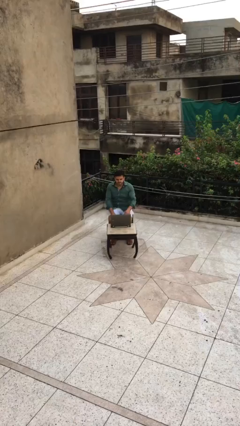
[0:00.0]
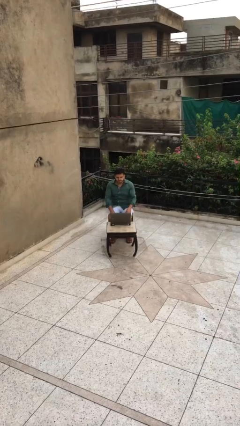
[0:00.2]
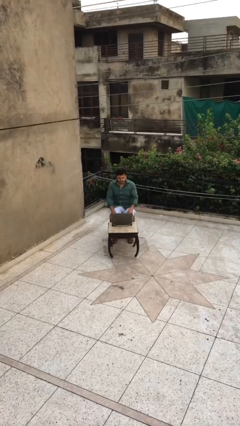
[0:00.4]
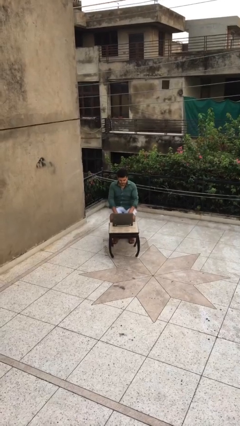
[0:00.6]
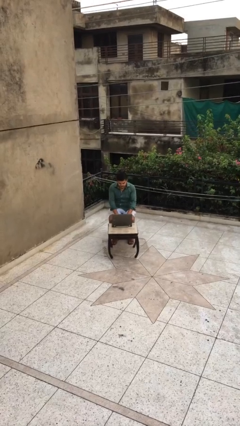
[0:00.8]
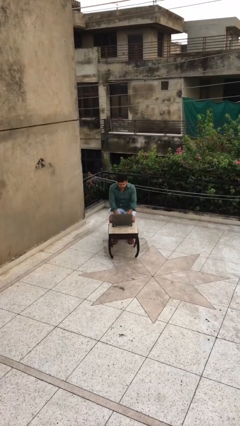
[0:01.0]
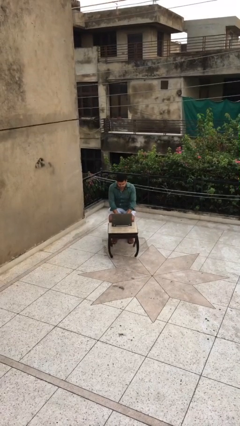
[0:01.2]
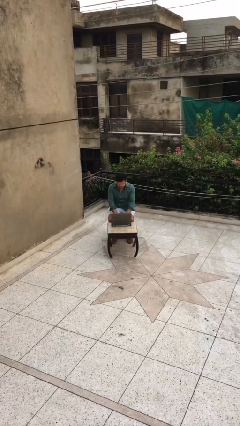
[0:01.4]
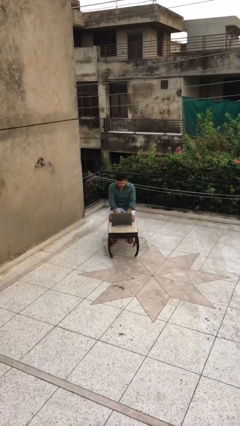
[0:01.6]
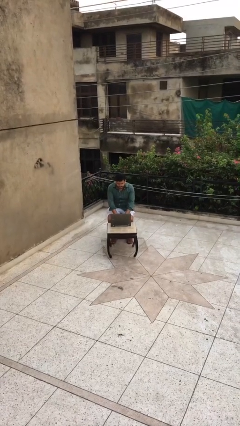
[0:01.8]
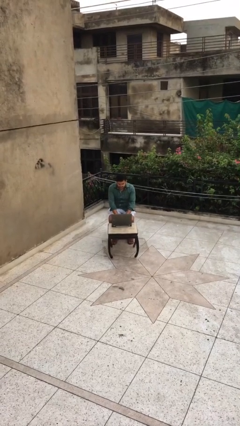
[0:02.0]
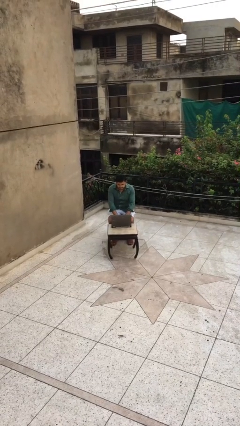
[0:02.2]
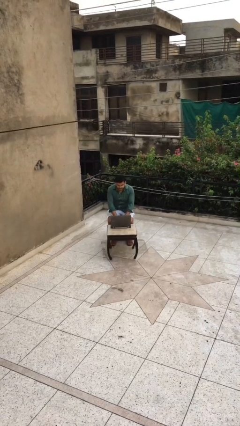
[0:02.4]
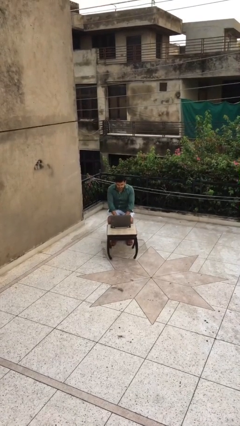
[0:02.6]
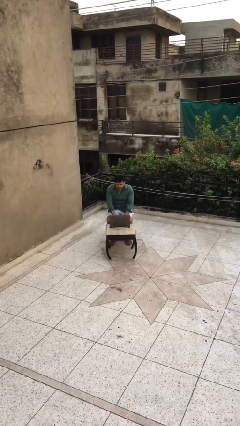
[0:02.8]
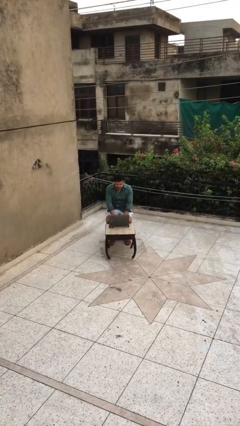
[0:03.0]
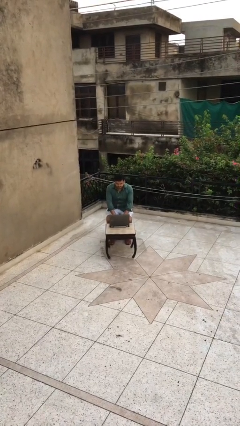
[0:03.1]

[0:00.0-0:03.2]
person interacts with laptop

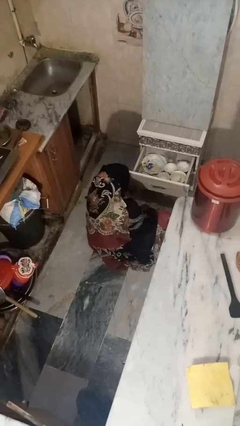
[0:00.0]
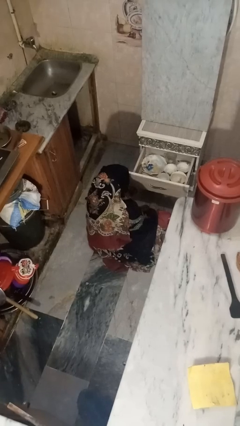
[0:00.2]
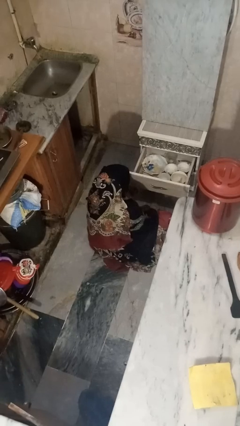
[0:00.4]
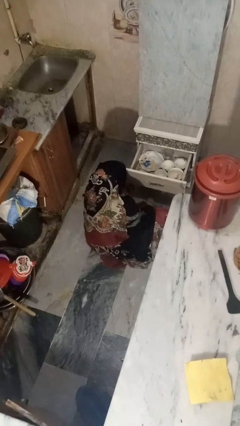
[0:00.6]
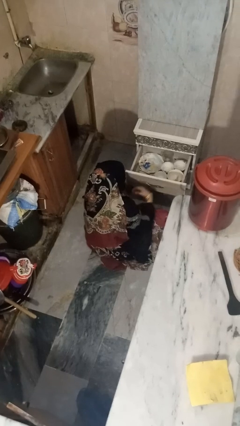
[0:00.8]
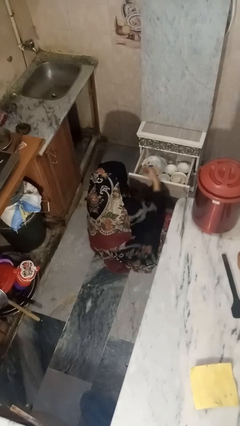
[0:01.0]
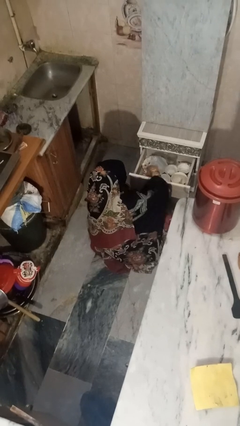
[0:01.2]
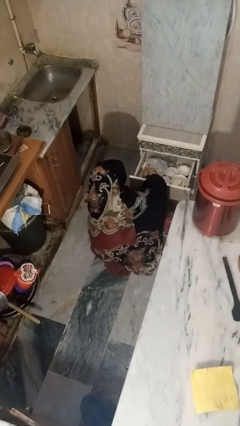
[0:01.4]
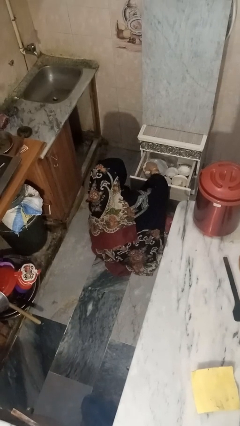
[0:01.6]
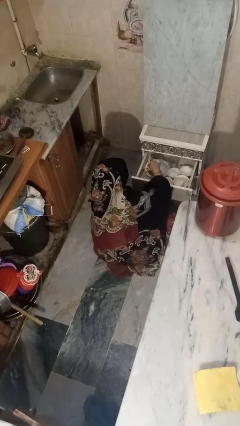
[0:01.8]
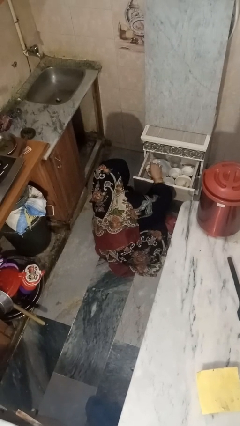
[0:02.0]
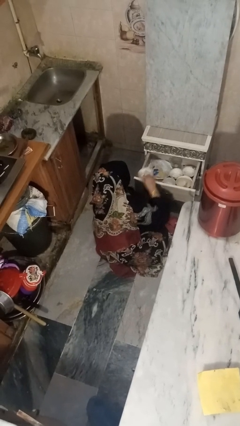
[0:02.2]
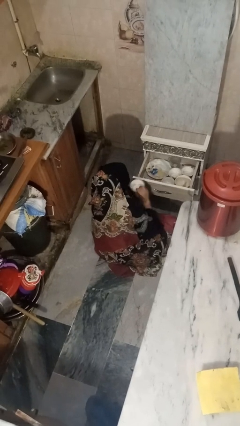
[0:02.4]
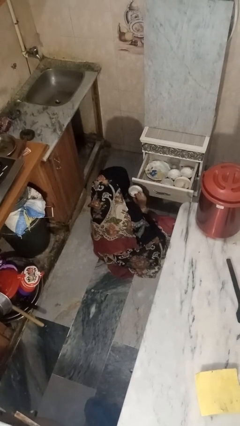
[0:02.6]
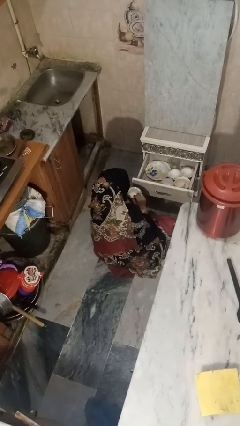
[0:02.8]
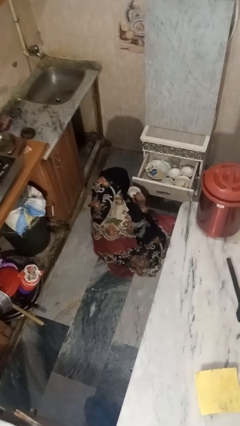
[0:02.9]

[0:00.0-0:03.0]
person takes object from kitchen drawer

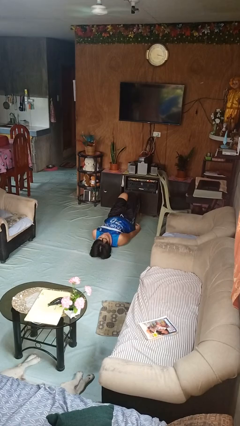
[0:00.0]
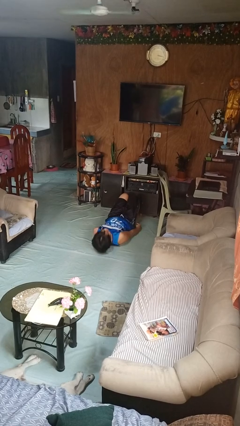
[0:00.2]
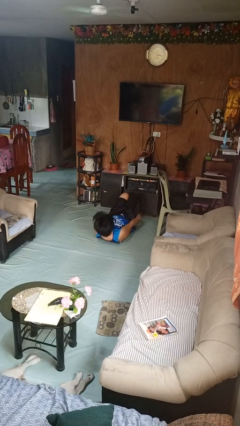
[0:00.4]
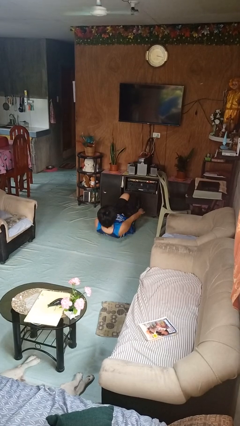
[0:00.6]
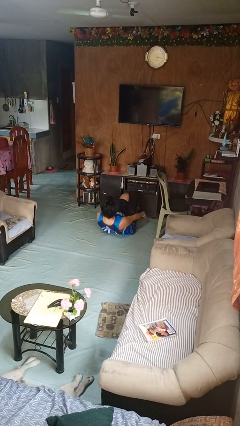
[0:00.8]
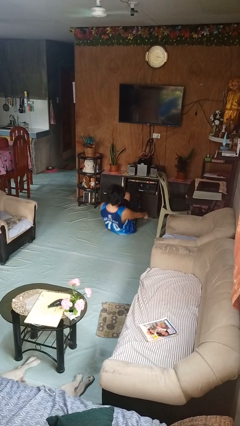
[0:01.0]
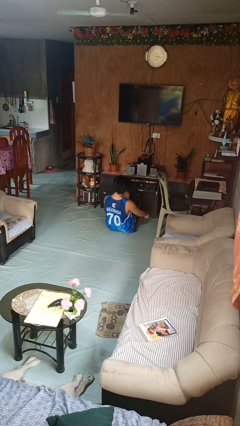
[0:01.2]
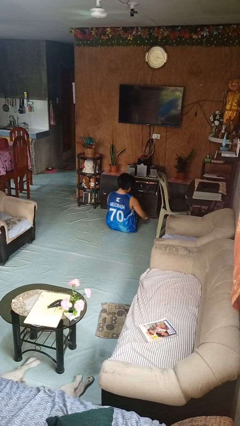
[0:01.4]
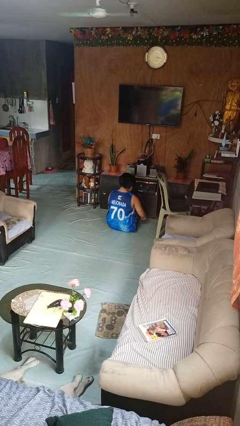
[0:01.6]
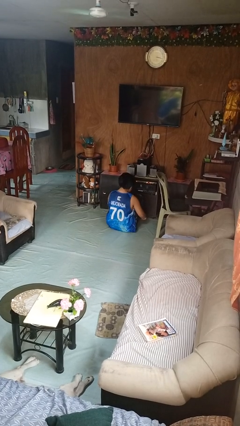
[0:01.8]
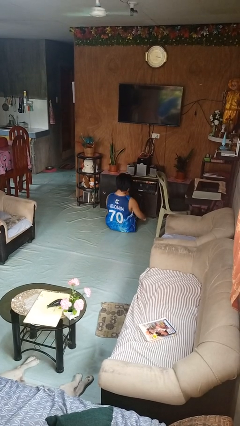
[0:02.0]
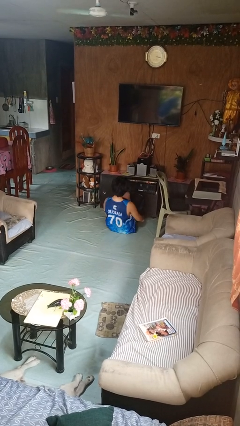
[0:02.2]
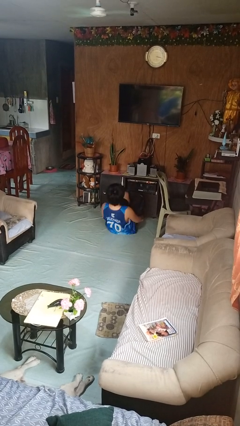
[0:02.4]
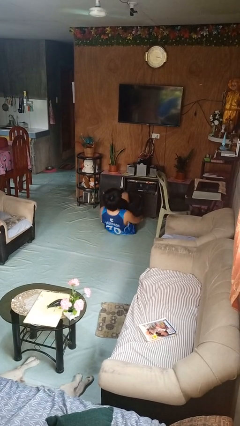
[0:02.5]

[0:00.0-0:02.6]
person exercises with situp

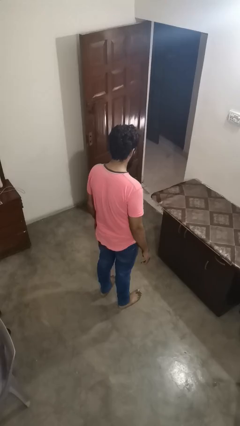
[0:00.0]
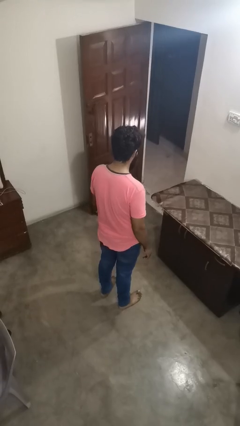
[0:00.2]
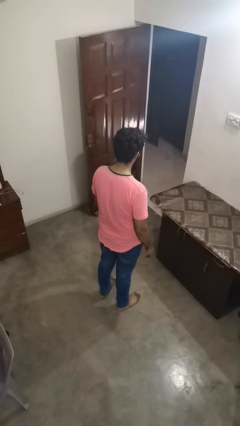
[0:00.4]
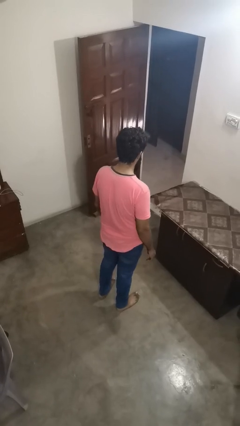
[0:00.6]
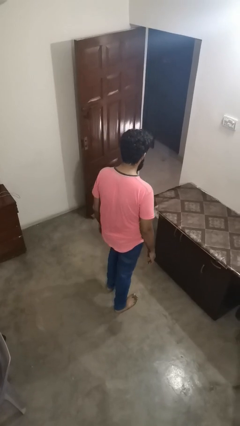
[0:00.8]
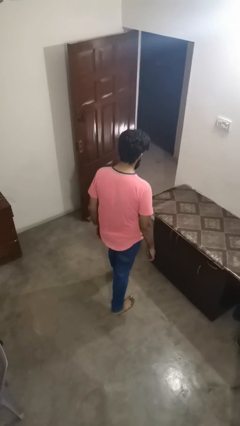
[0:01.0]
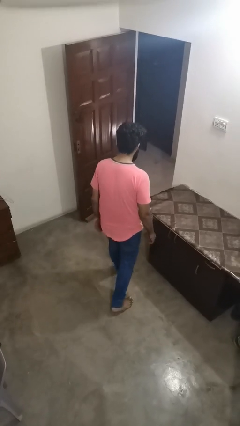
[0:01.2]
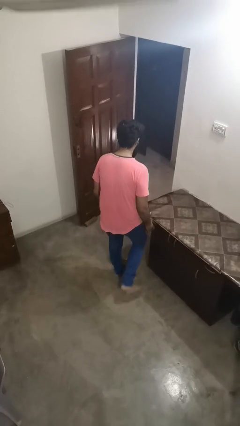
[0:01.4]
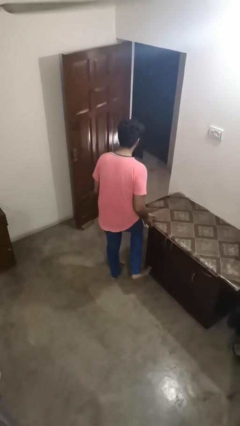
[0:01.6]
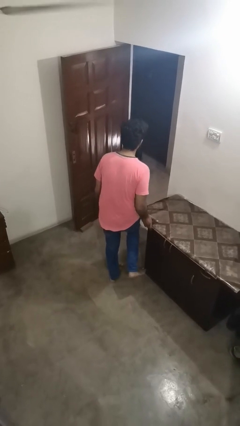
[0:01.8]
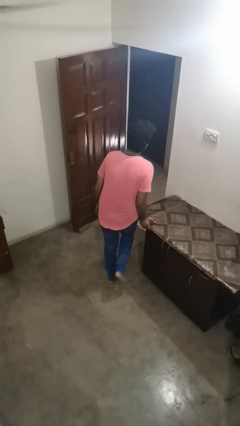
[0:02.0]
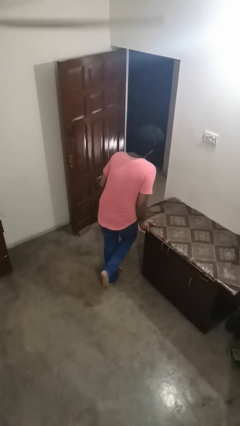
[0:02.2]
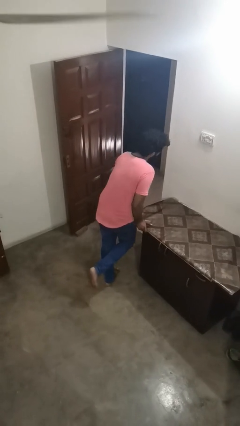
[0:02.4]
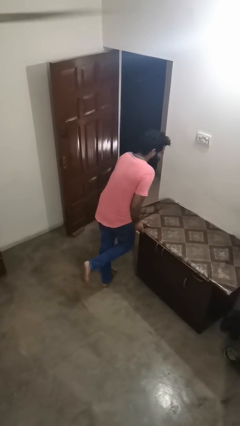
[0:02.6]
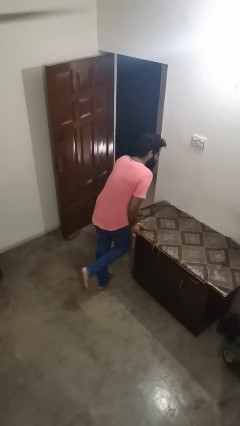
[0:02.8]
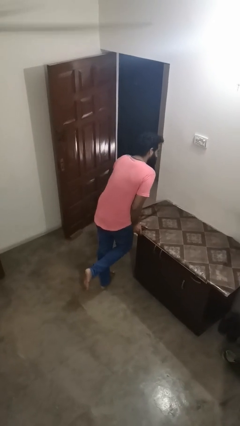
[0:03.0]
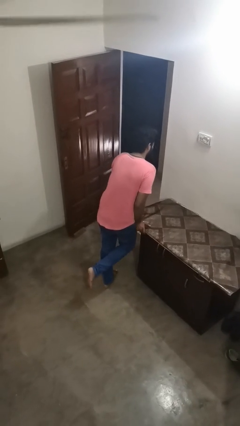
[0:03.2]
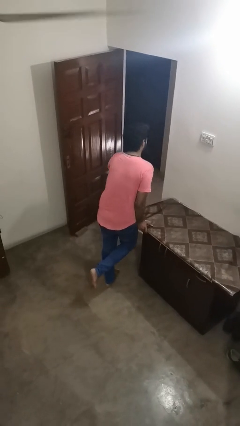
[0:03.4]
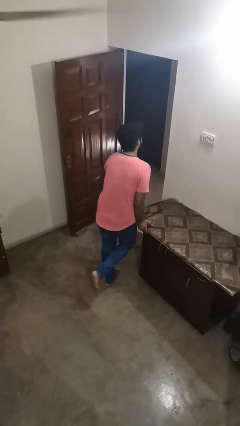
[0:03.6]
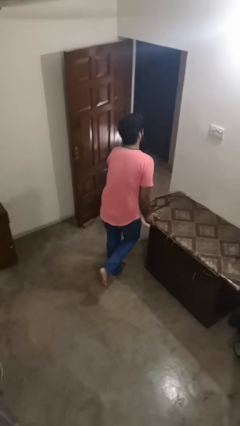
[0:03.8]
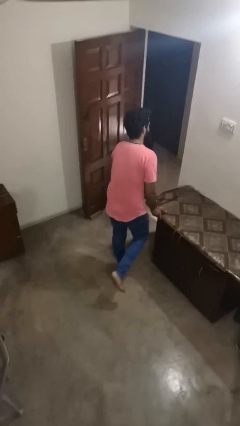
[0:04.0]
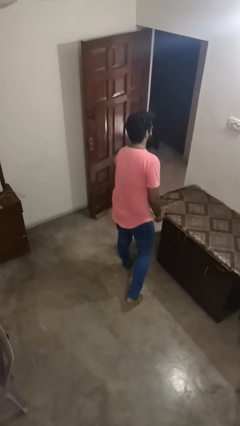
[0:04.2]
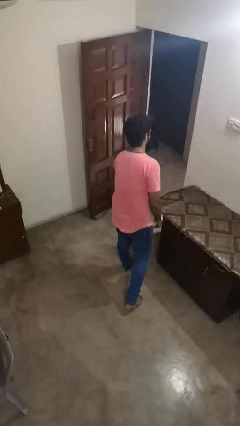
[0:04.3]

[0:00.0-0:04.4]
person bumps into table

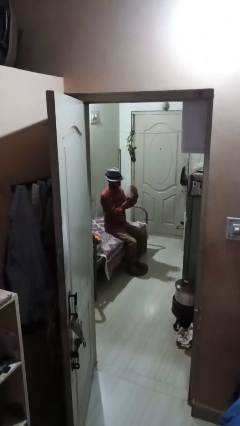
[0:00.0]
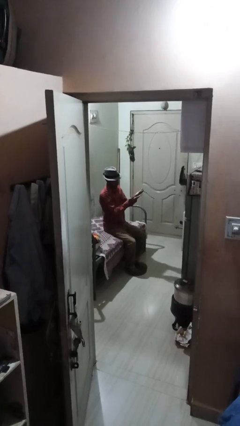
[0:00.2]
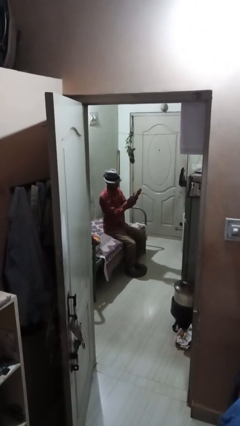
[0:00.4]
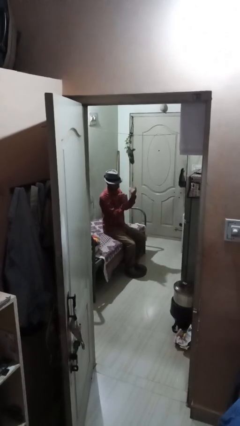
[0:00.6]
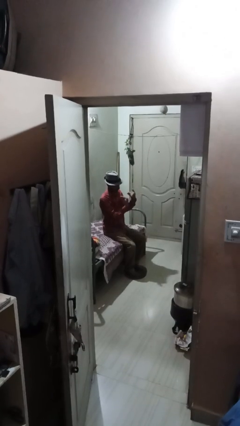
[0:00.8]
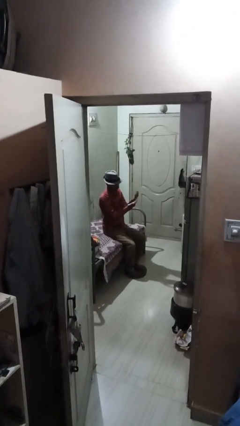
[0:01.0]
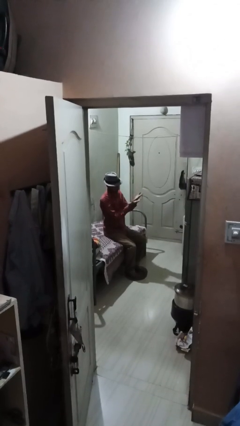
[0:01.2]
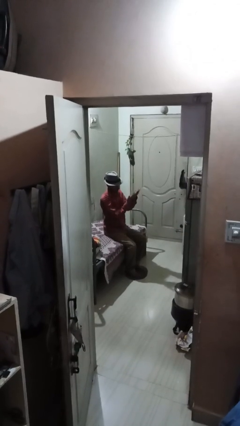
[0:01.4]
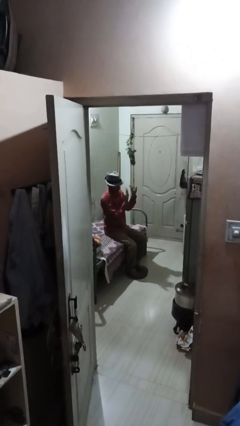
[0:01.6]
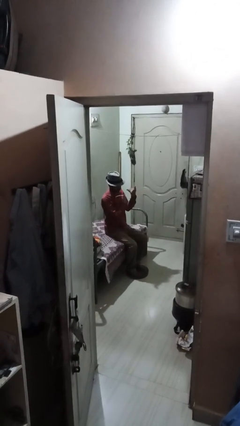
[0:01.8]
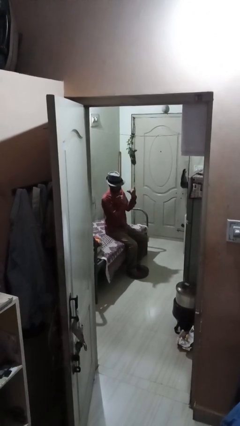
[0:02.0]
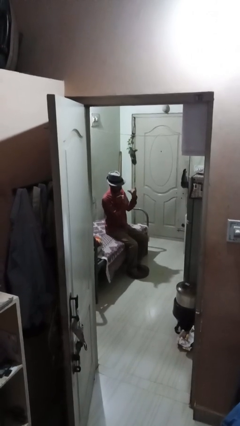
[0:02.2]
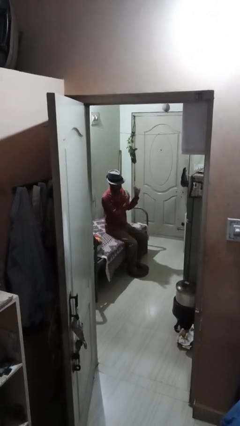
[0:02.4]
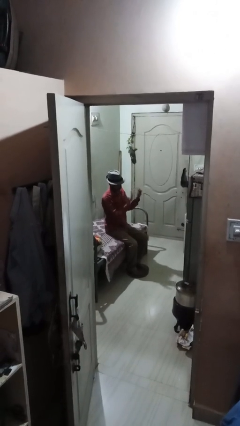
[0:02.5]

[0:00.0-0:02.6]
person gestures come here

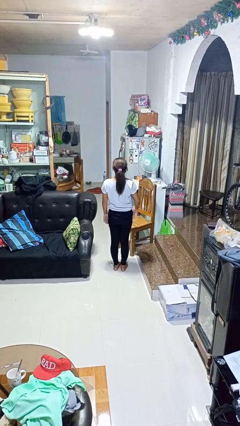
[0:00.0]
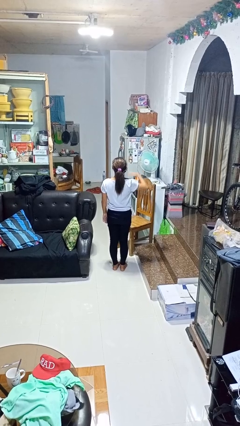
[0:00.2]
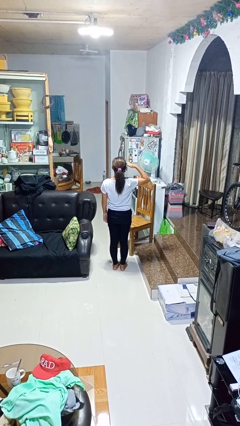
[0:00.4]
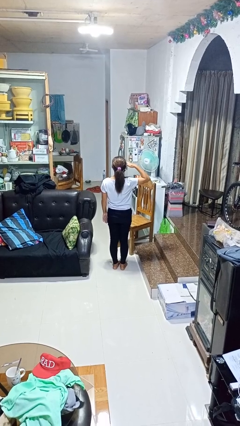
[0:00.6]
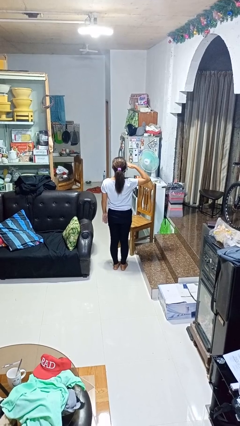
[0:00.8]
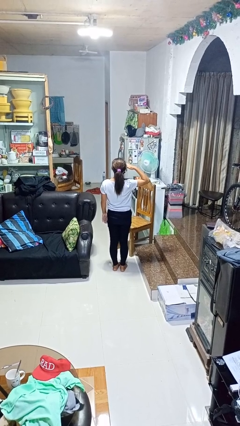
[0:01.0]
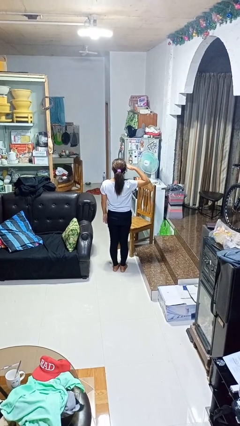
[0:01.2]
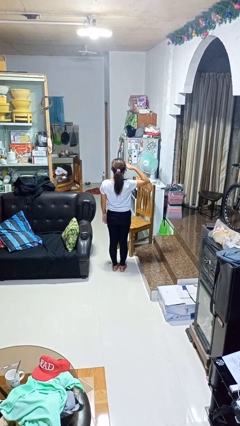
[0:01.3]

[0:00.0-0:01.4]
person salutes
